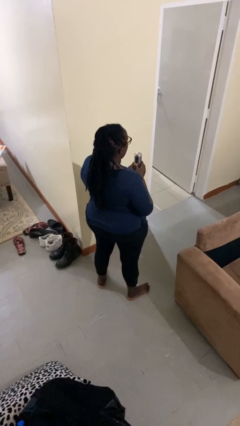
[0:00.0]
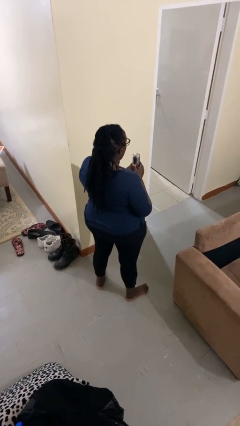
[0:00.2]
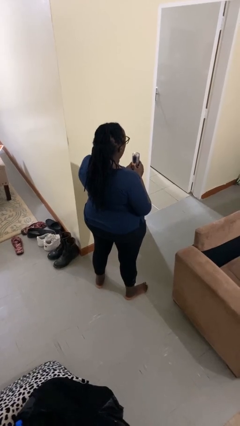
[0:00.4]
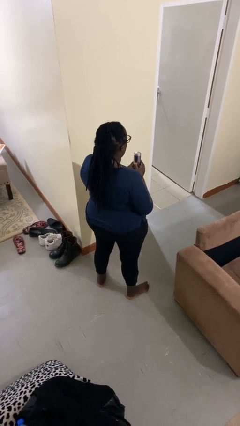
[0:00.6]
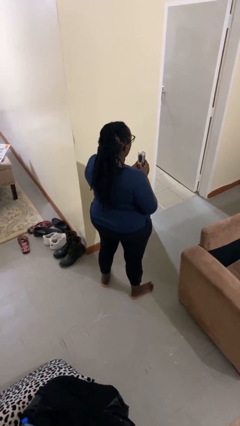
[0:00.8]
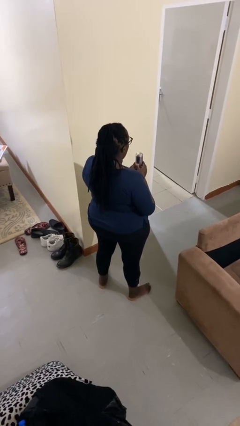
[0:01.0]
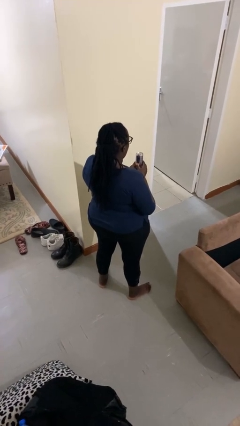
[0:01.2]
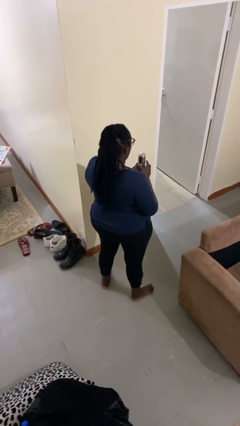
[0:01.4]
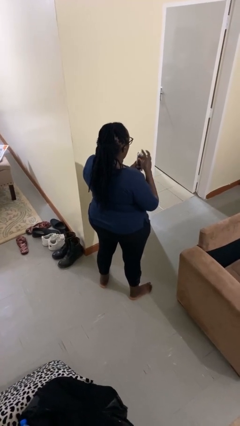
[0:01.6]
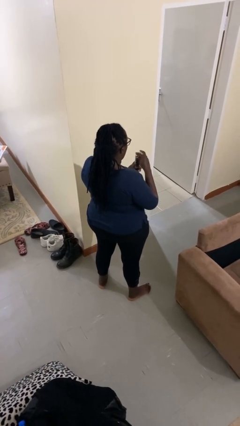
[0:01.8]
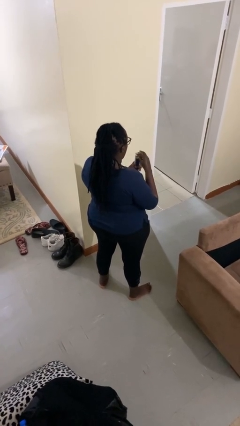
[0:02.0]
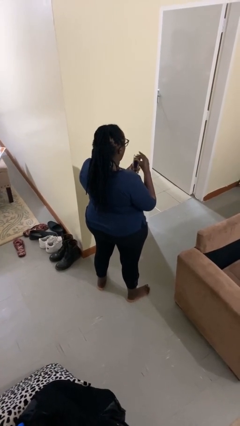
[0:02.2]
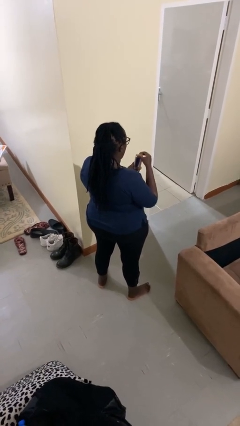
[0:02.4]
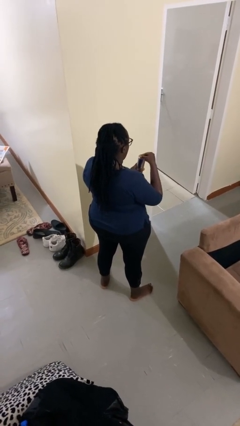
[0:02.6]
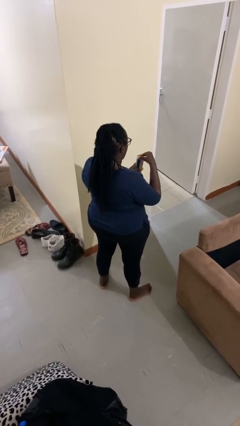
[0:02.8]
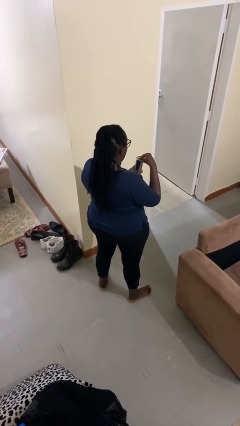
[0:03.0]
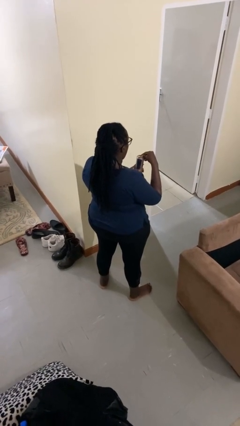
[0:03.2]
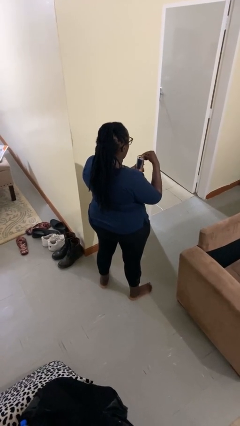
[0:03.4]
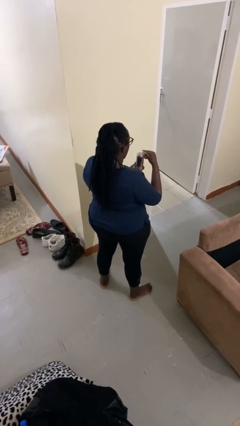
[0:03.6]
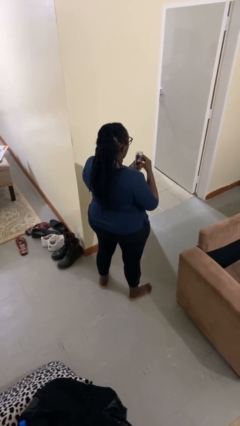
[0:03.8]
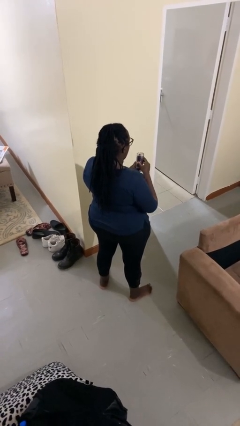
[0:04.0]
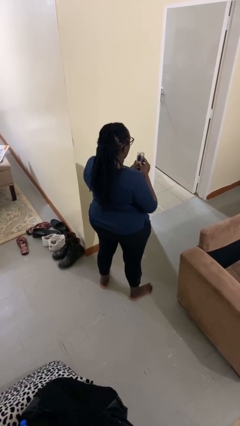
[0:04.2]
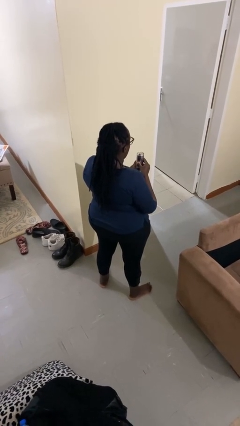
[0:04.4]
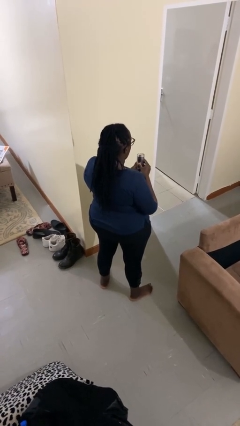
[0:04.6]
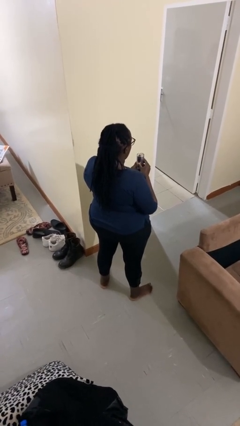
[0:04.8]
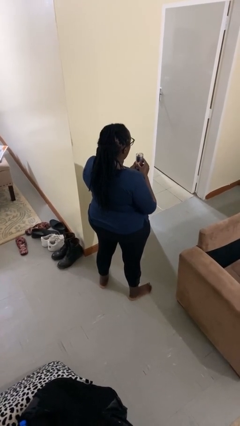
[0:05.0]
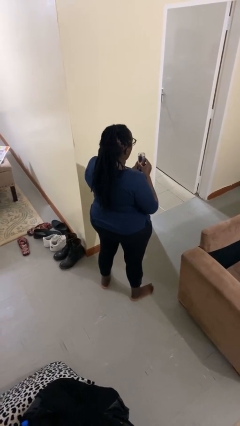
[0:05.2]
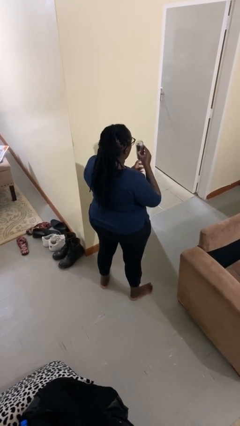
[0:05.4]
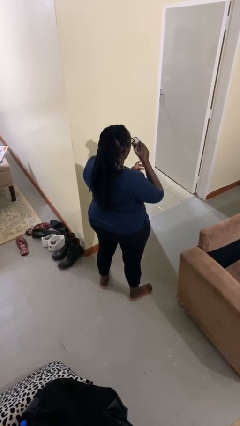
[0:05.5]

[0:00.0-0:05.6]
person opens beverage can

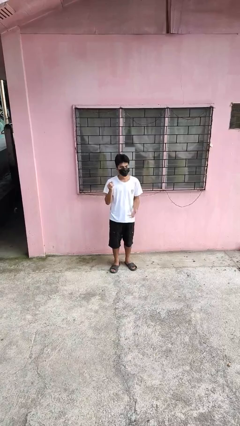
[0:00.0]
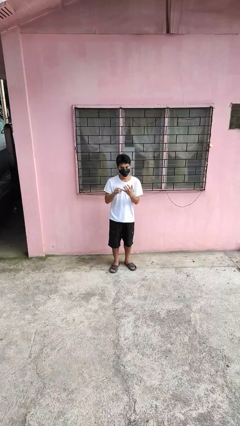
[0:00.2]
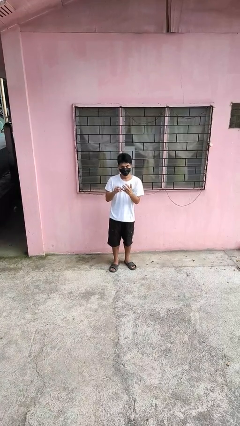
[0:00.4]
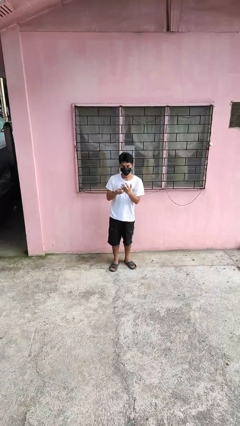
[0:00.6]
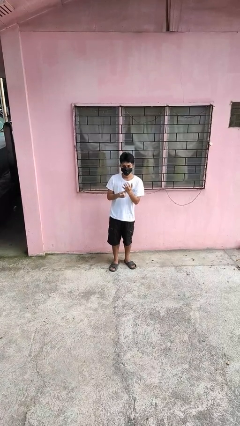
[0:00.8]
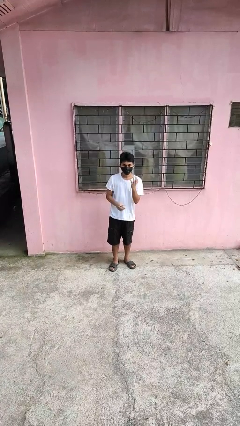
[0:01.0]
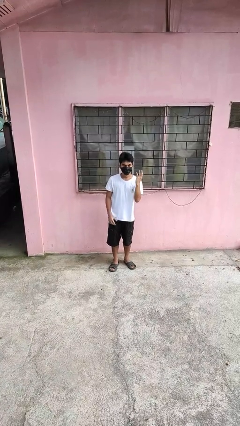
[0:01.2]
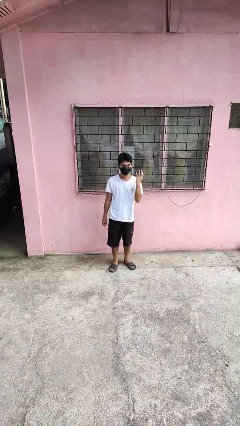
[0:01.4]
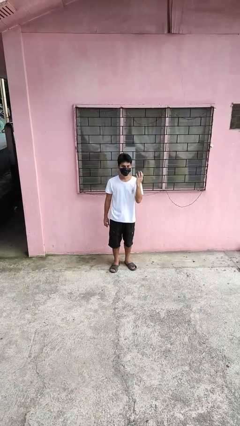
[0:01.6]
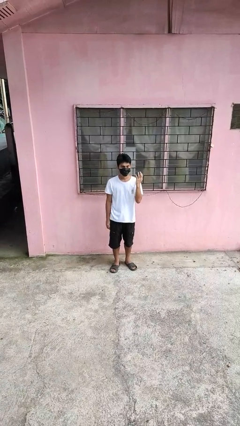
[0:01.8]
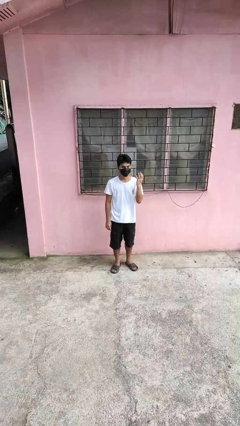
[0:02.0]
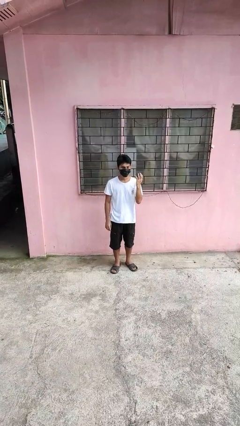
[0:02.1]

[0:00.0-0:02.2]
person puts on ring

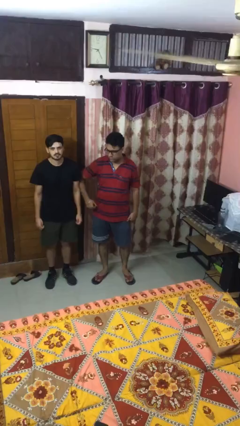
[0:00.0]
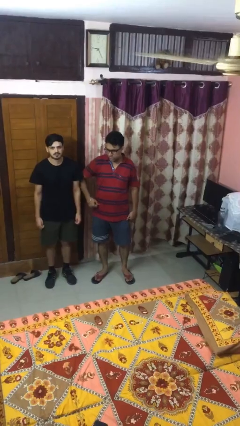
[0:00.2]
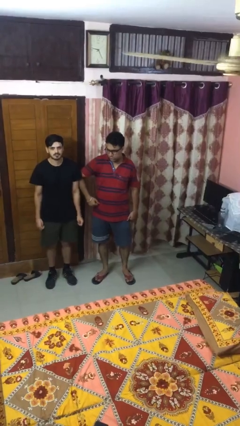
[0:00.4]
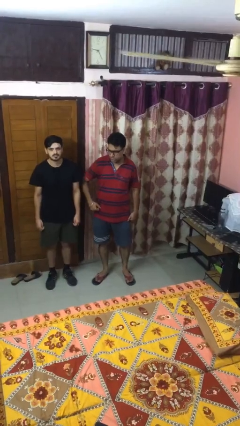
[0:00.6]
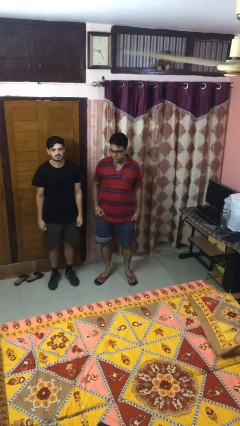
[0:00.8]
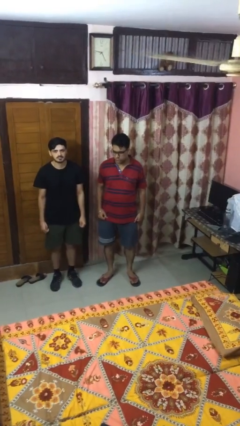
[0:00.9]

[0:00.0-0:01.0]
person nudges person with elbow

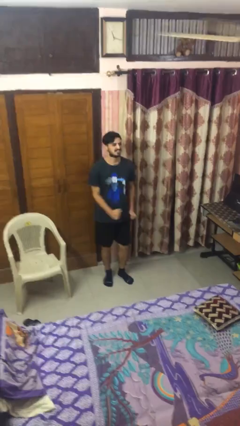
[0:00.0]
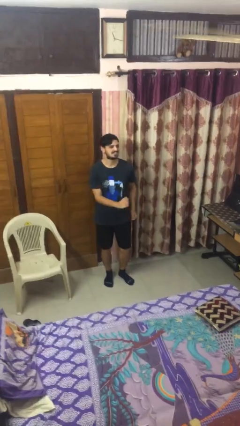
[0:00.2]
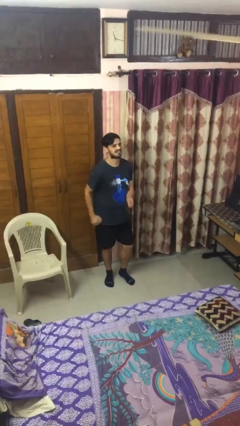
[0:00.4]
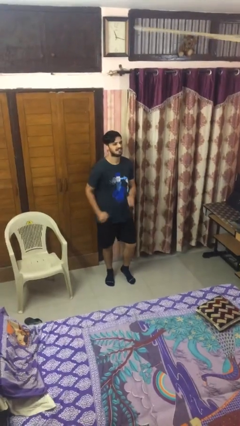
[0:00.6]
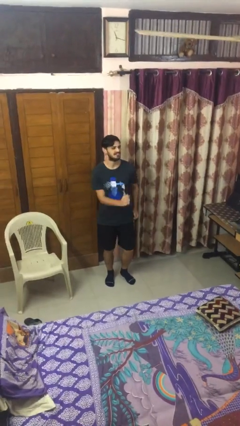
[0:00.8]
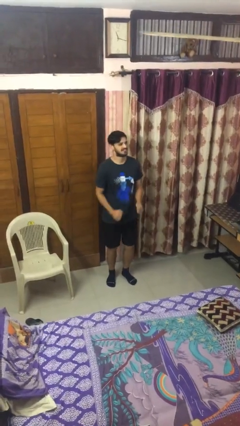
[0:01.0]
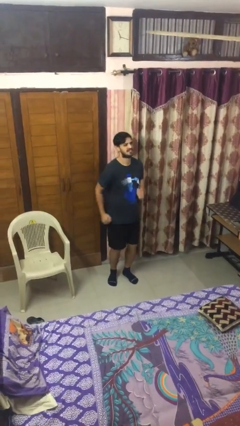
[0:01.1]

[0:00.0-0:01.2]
person dances in place

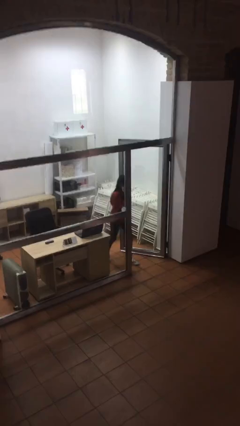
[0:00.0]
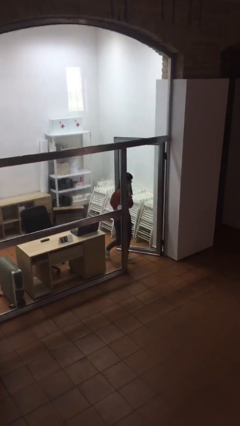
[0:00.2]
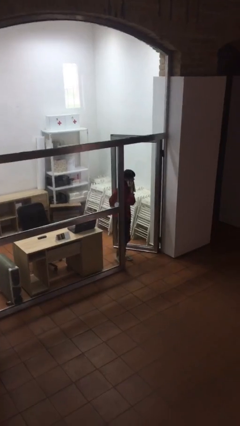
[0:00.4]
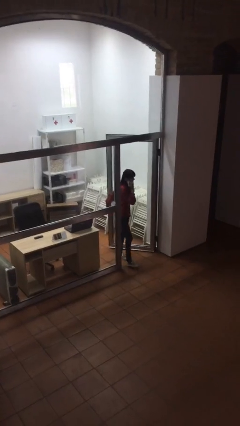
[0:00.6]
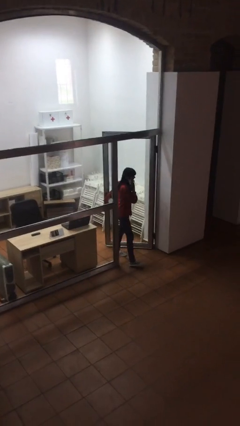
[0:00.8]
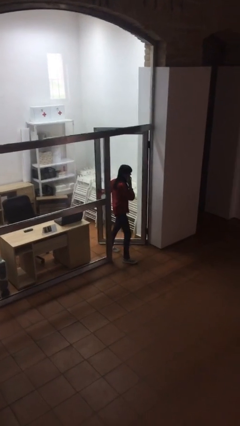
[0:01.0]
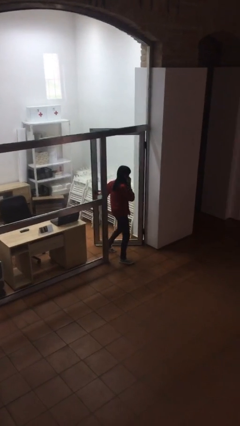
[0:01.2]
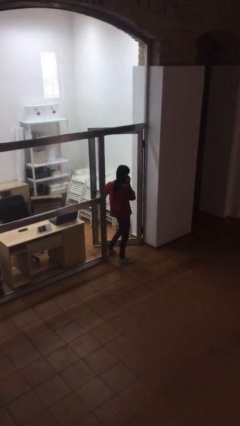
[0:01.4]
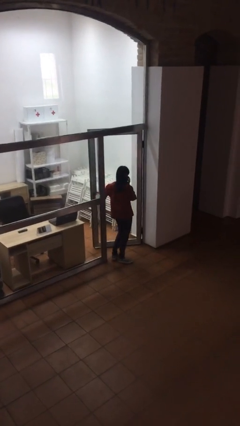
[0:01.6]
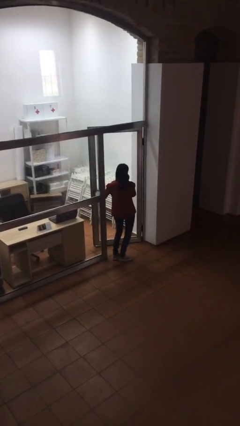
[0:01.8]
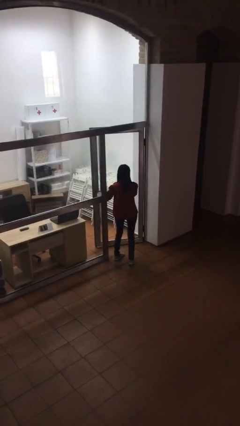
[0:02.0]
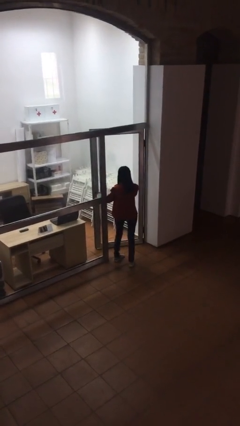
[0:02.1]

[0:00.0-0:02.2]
person enters scene through structure

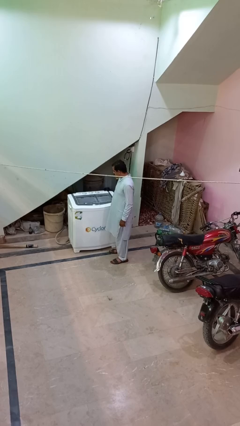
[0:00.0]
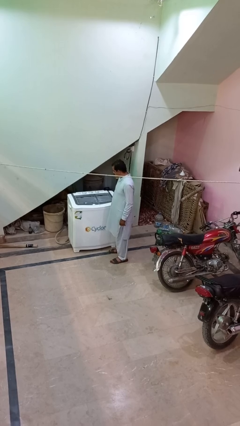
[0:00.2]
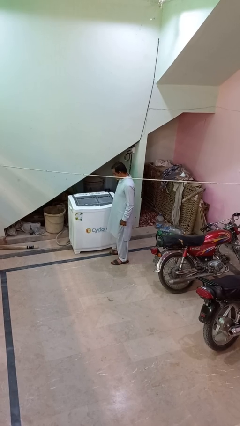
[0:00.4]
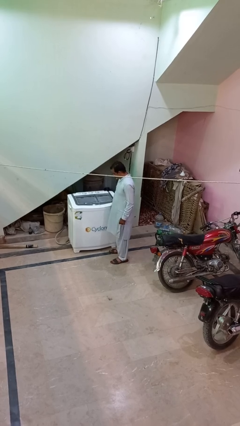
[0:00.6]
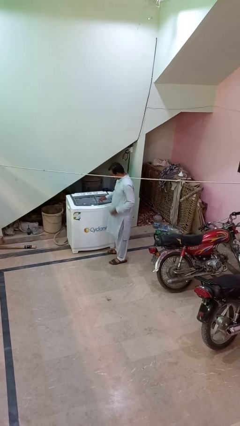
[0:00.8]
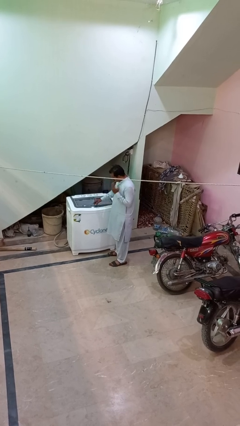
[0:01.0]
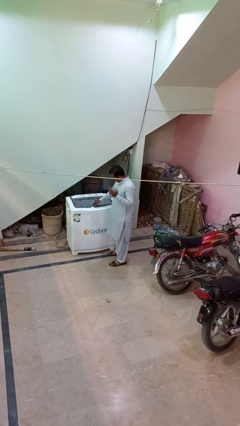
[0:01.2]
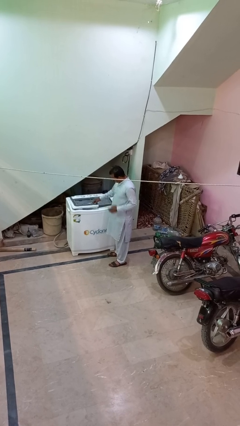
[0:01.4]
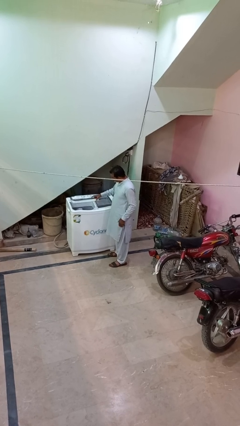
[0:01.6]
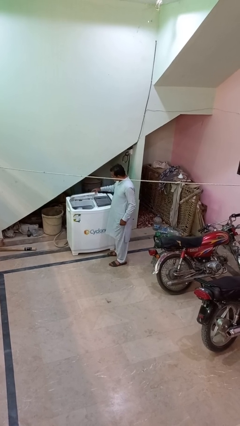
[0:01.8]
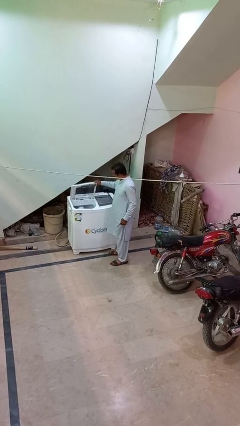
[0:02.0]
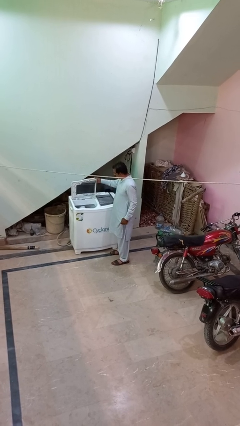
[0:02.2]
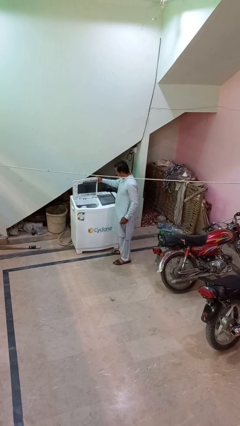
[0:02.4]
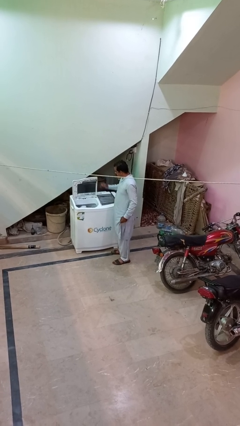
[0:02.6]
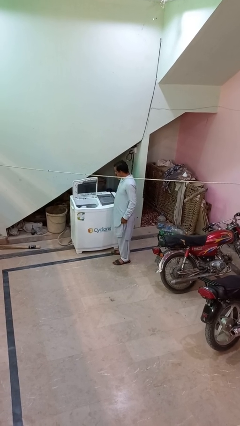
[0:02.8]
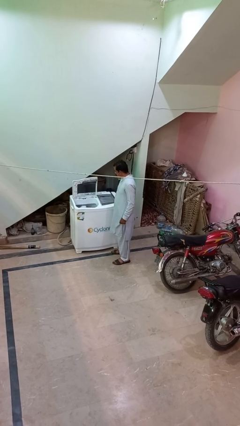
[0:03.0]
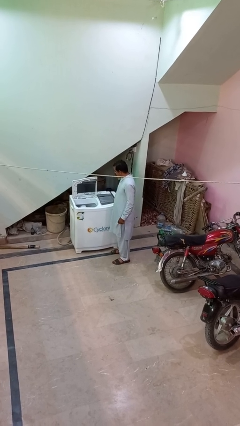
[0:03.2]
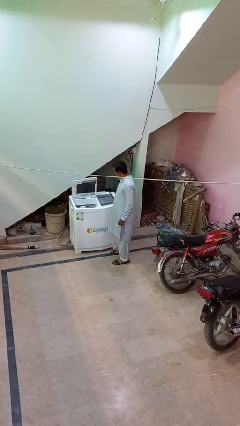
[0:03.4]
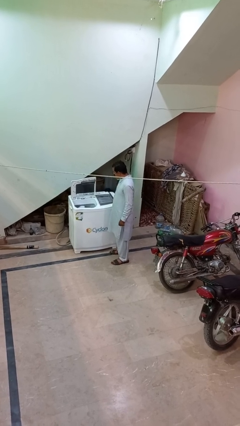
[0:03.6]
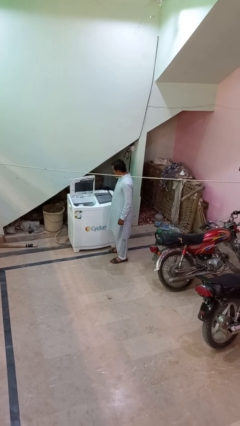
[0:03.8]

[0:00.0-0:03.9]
person opens clothes washer

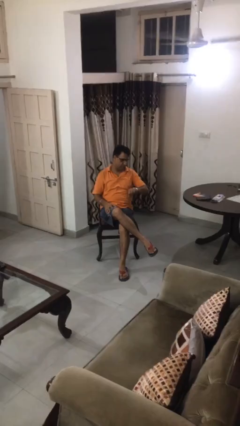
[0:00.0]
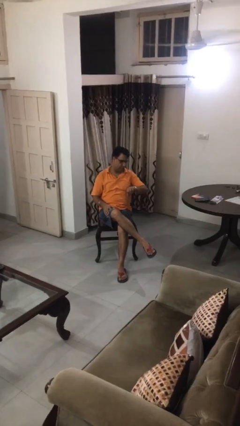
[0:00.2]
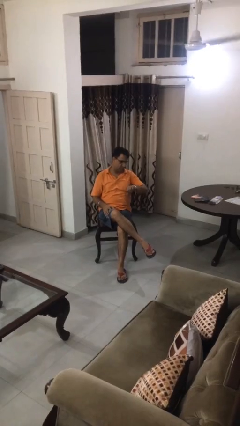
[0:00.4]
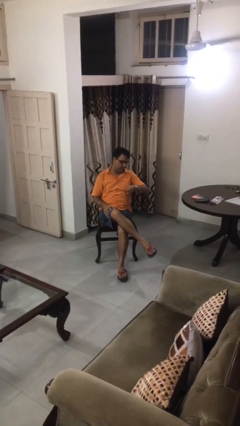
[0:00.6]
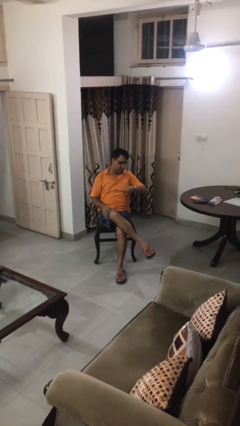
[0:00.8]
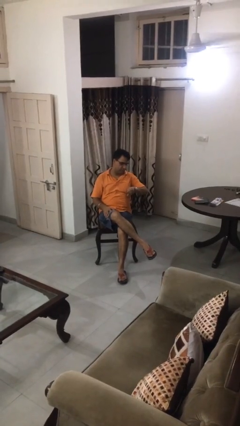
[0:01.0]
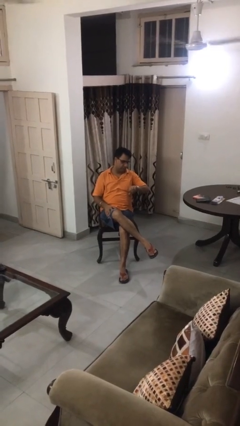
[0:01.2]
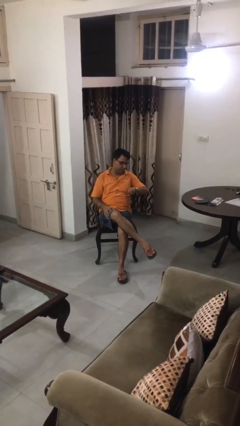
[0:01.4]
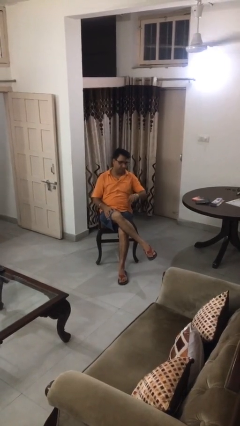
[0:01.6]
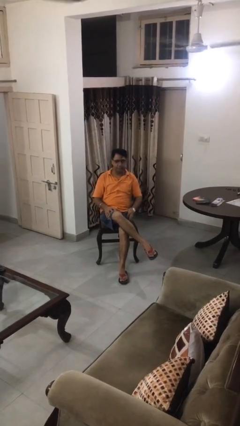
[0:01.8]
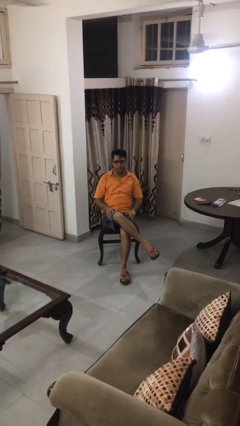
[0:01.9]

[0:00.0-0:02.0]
person looks at wristwatch
